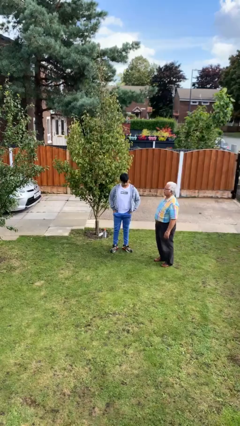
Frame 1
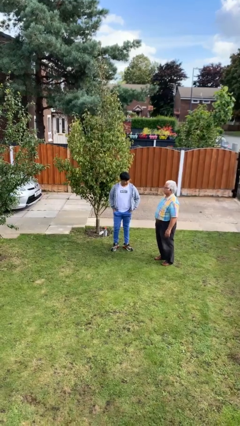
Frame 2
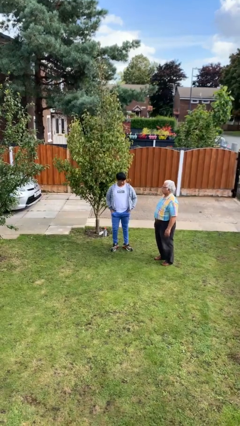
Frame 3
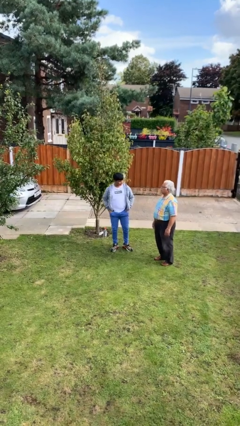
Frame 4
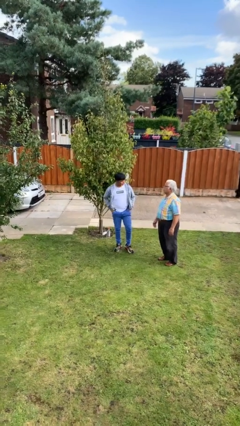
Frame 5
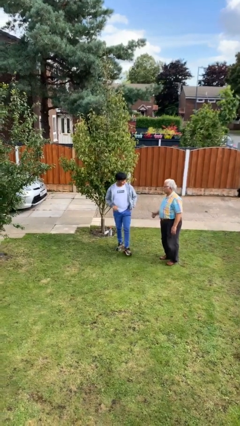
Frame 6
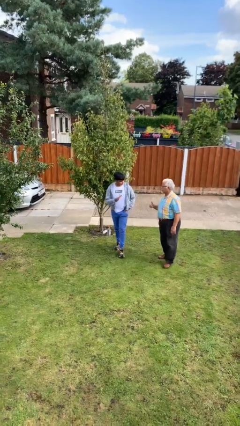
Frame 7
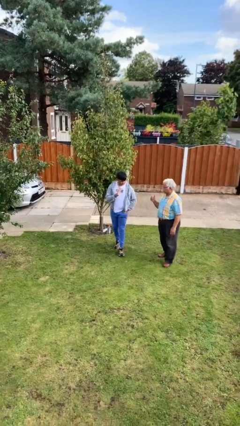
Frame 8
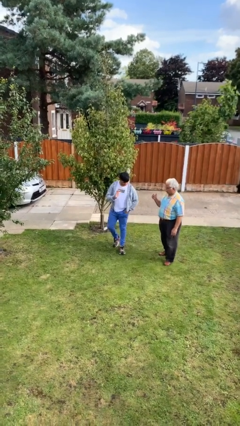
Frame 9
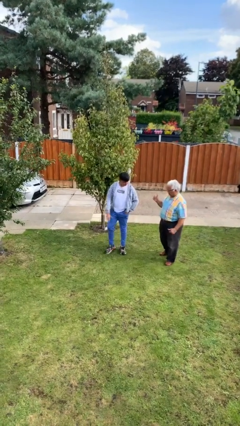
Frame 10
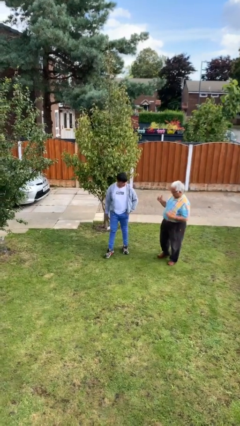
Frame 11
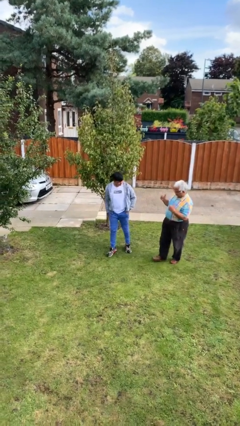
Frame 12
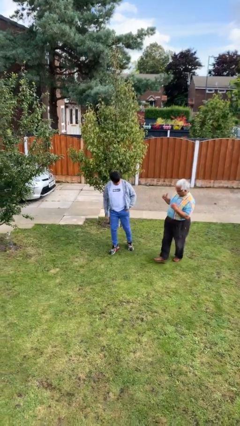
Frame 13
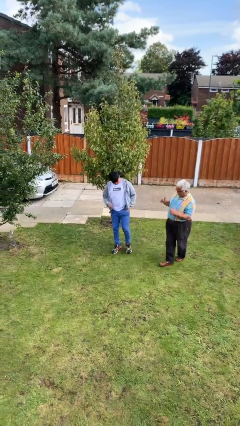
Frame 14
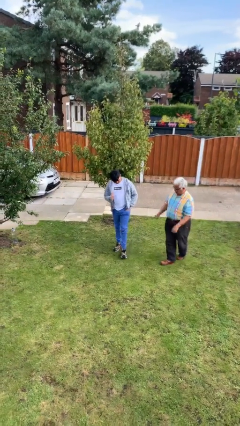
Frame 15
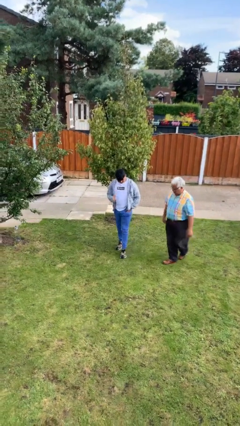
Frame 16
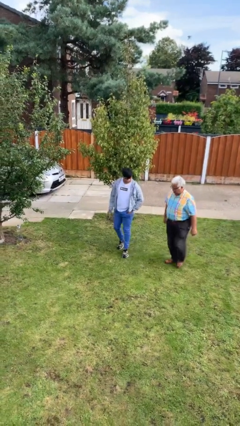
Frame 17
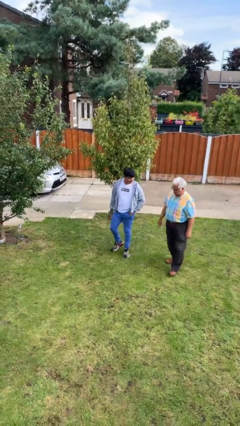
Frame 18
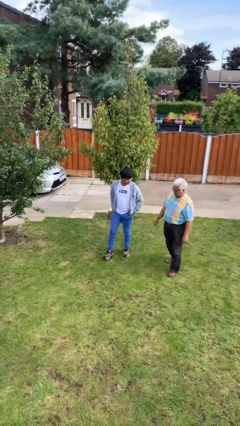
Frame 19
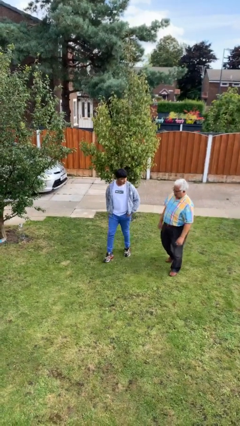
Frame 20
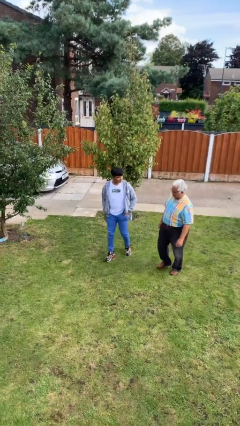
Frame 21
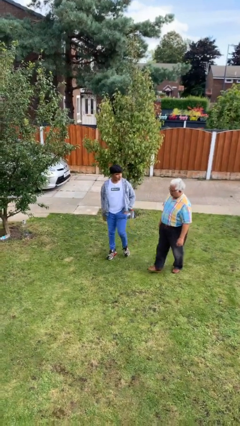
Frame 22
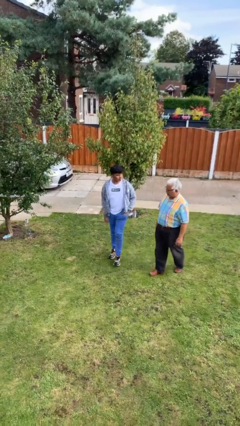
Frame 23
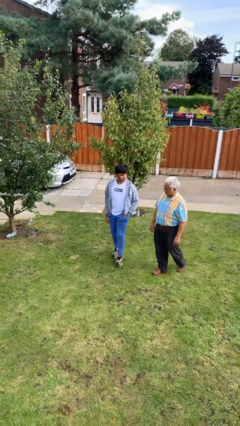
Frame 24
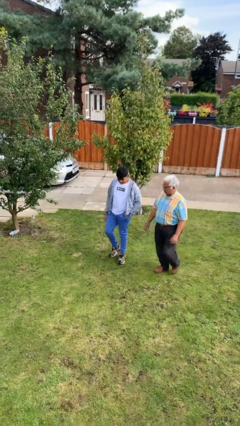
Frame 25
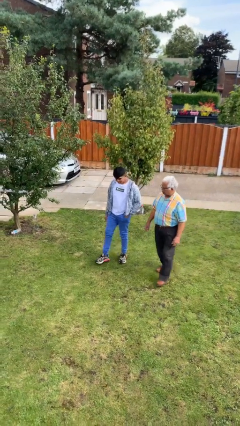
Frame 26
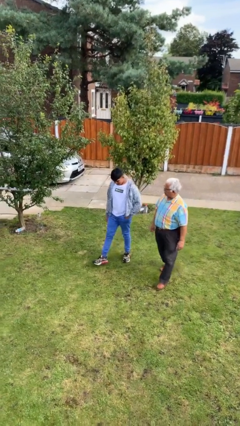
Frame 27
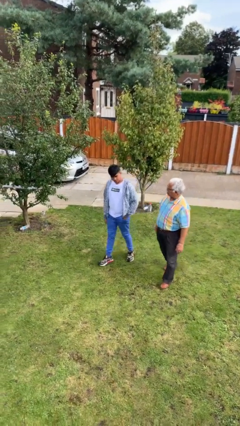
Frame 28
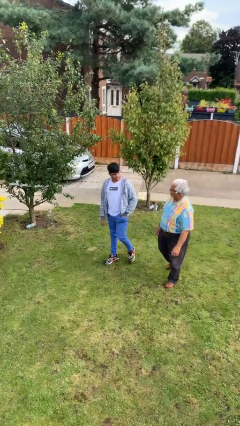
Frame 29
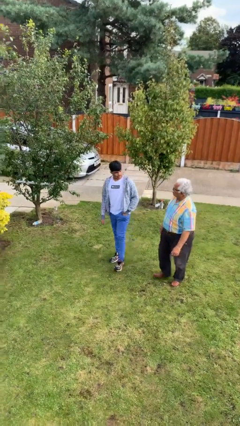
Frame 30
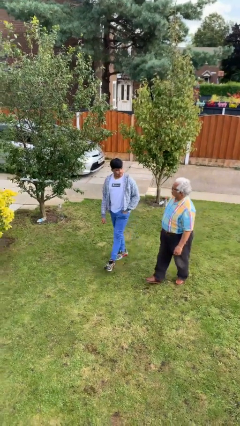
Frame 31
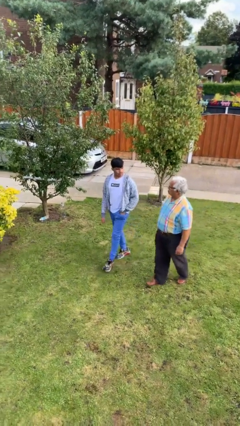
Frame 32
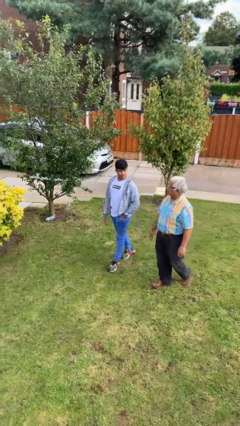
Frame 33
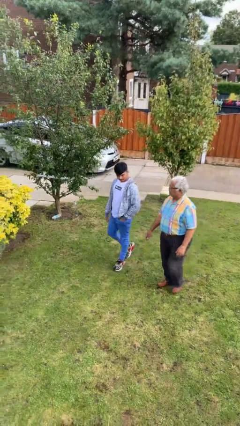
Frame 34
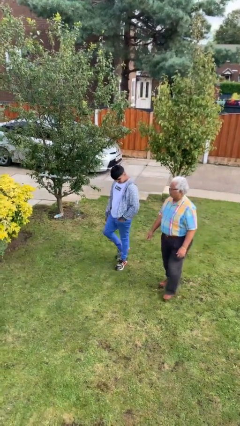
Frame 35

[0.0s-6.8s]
person talks to person

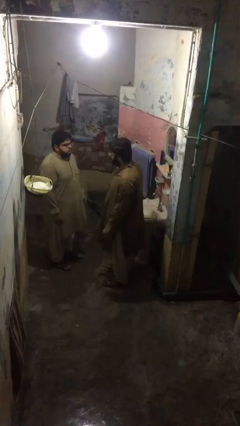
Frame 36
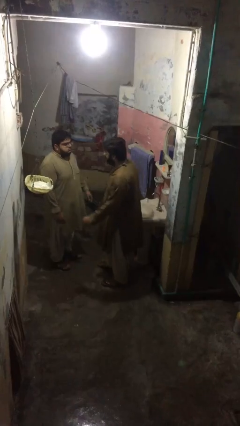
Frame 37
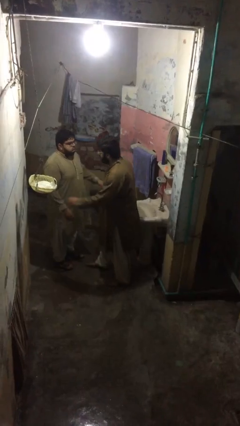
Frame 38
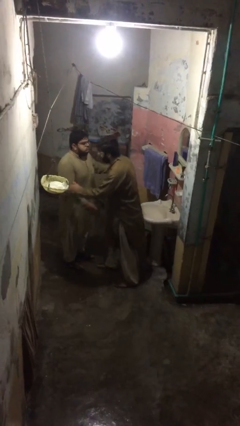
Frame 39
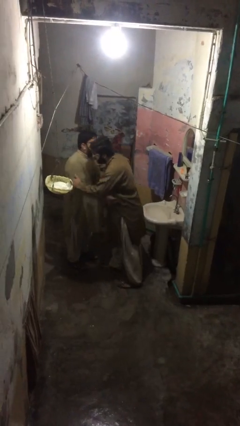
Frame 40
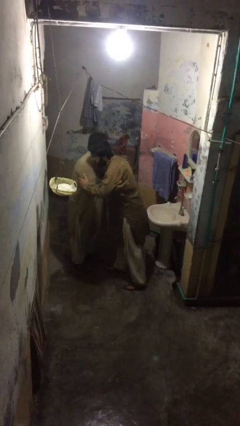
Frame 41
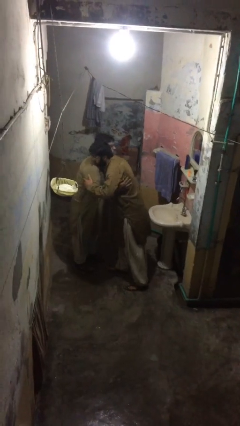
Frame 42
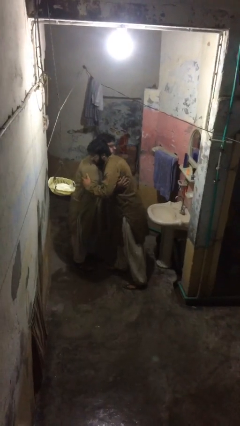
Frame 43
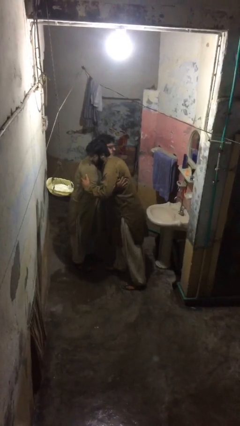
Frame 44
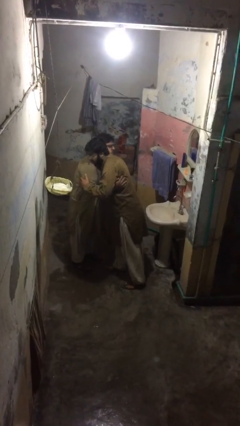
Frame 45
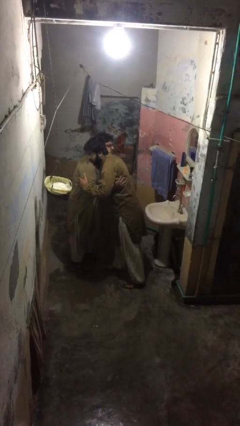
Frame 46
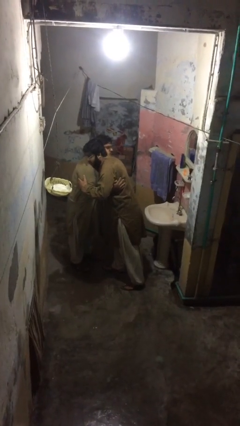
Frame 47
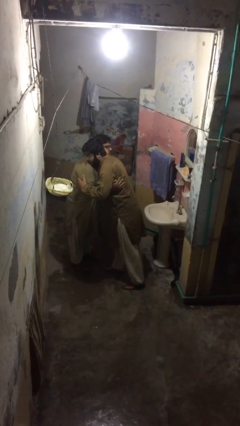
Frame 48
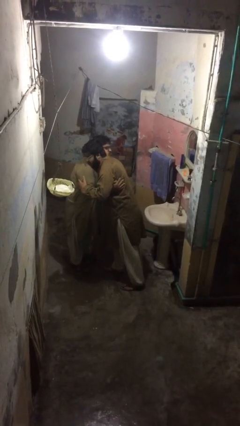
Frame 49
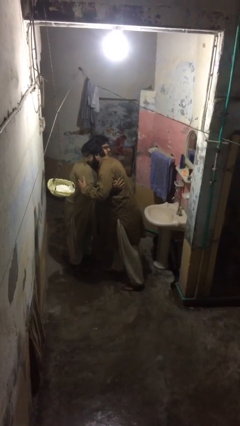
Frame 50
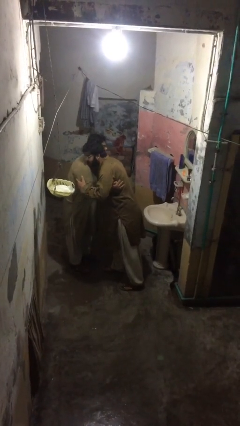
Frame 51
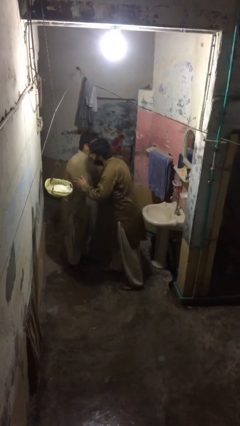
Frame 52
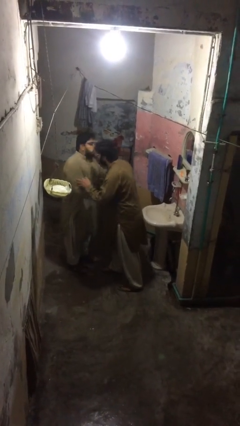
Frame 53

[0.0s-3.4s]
person embraces person

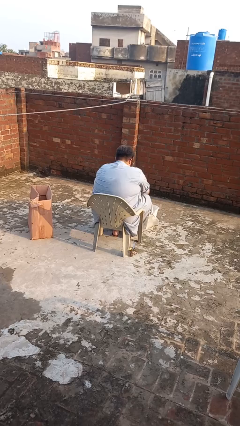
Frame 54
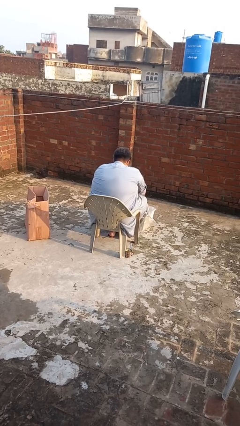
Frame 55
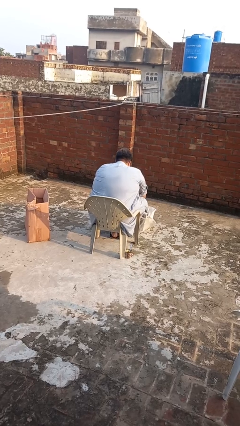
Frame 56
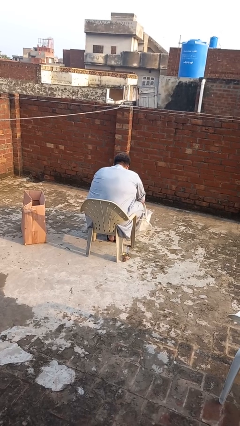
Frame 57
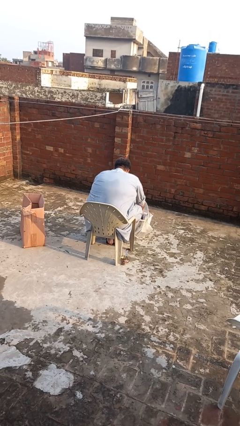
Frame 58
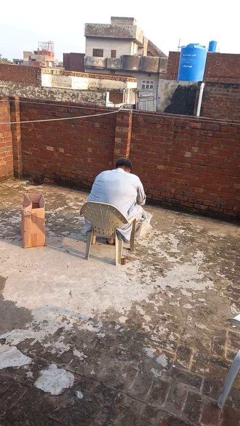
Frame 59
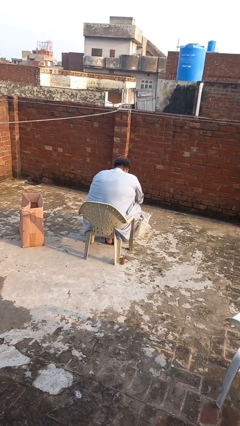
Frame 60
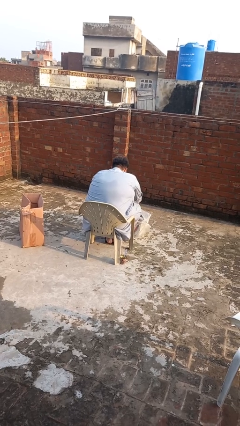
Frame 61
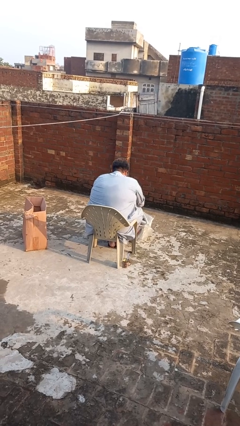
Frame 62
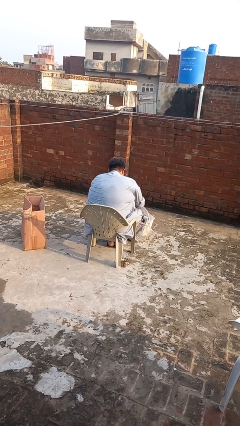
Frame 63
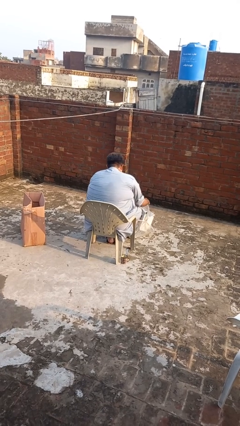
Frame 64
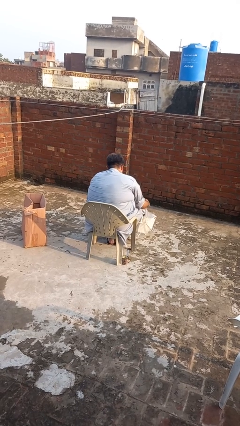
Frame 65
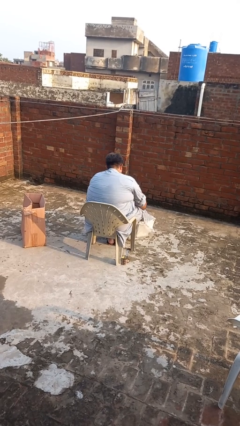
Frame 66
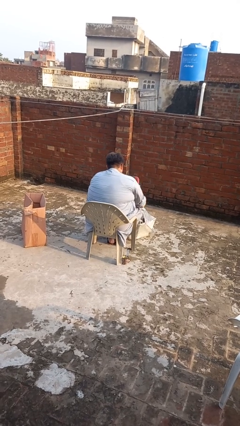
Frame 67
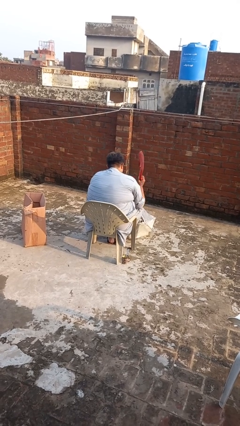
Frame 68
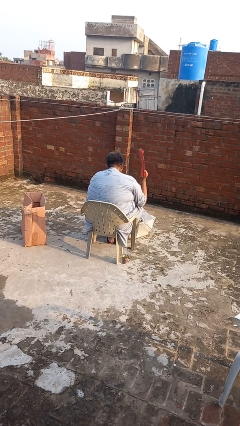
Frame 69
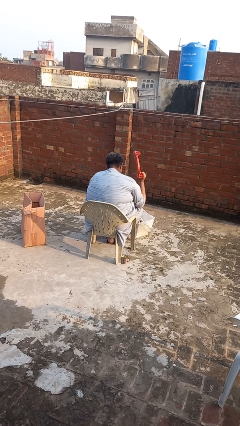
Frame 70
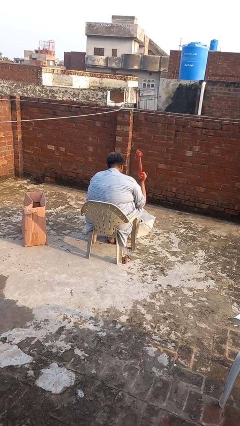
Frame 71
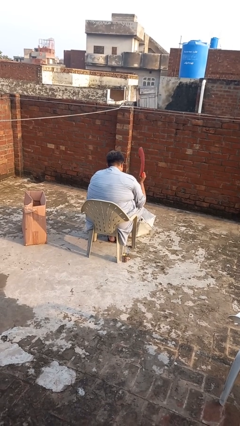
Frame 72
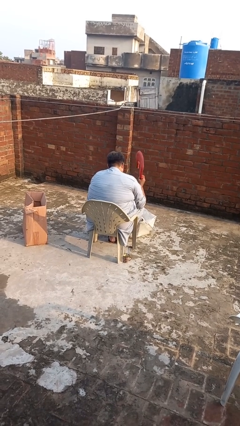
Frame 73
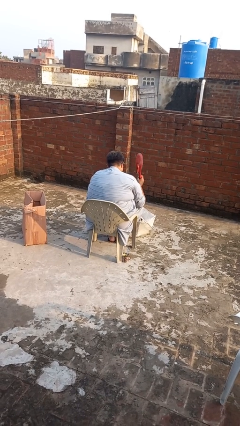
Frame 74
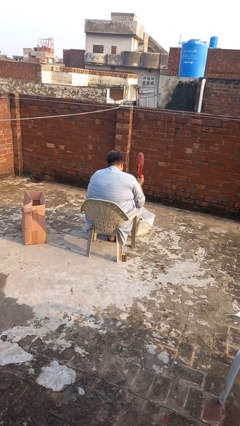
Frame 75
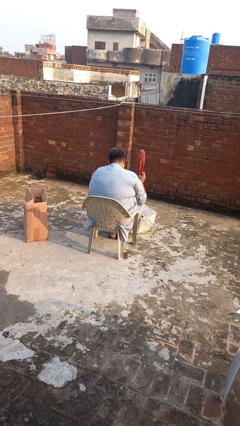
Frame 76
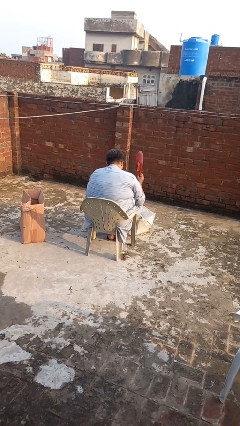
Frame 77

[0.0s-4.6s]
person searches in bag

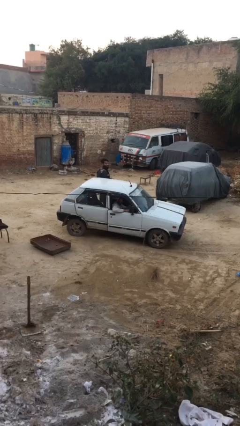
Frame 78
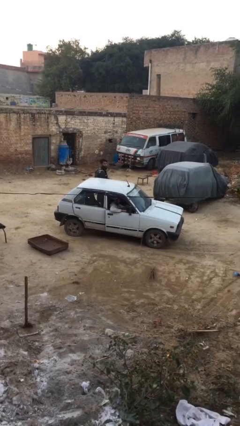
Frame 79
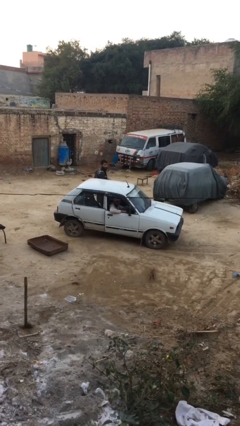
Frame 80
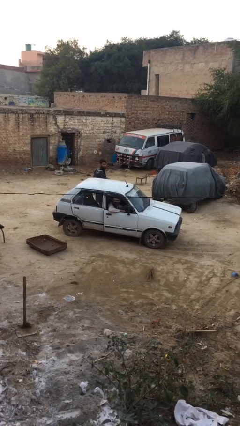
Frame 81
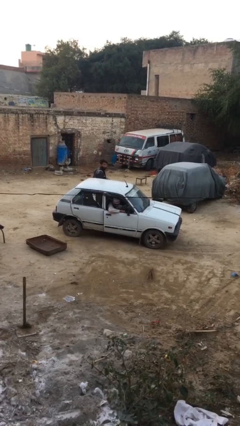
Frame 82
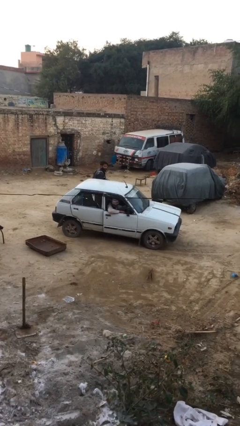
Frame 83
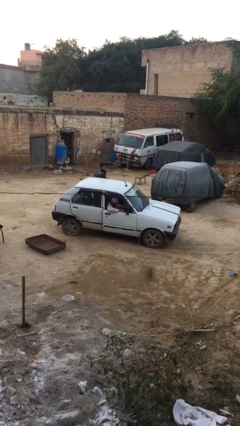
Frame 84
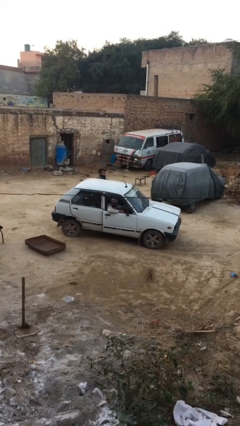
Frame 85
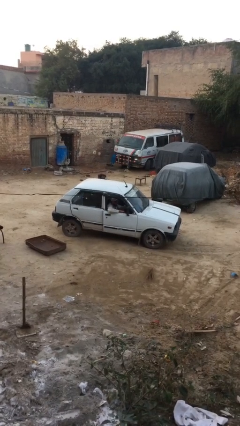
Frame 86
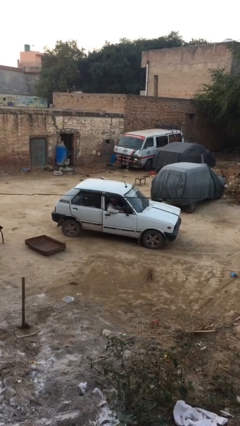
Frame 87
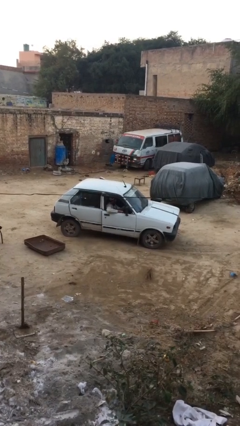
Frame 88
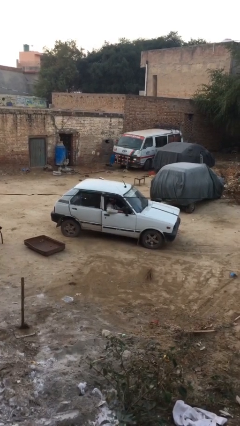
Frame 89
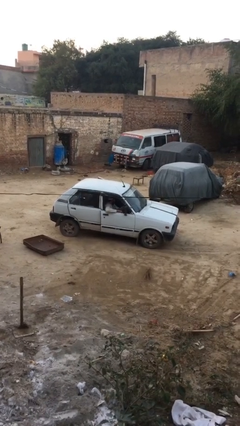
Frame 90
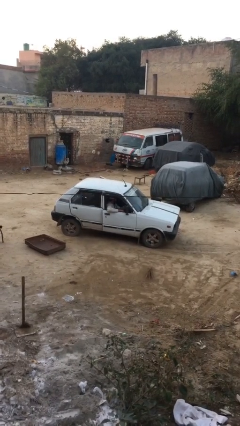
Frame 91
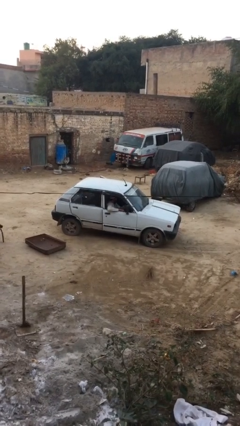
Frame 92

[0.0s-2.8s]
car picks up person

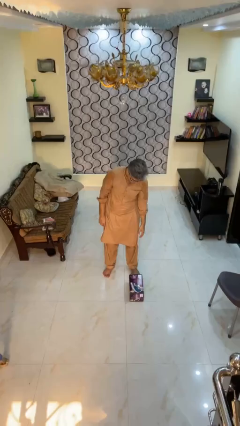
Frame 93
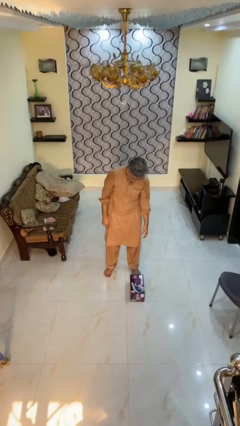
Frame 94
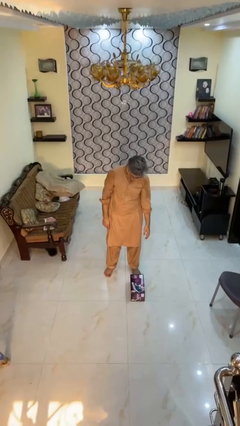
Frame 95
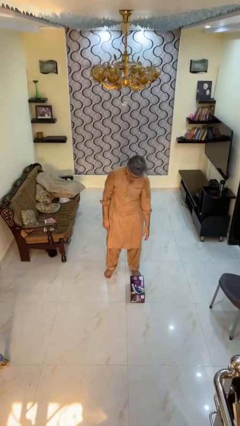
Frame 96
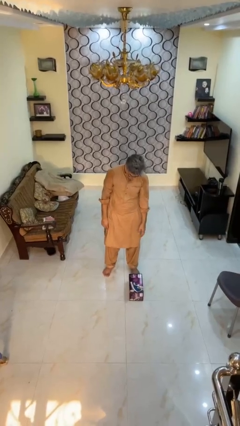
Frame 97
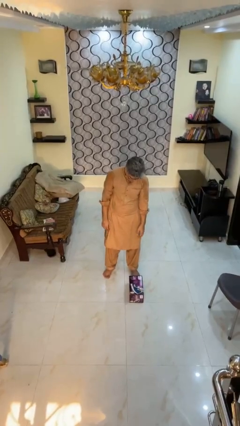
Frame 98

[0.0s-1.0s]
person drops object
